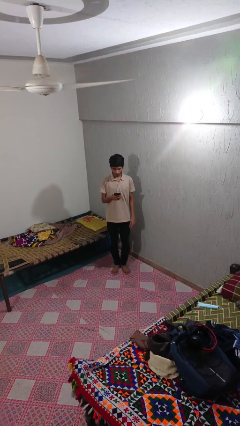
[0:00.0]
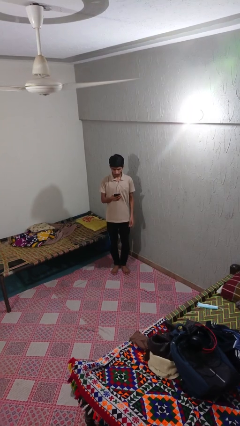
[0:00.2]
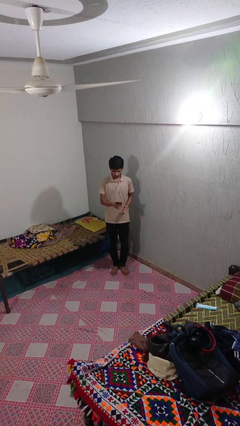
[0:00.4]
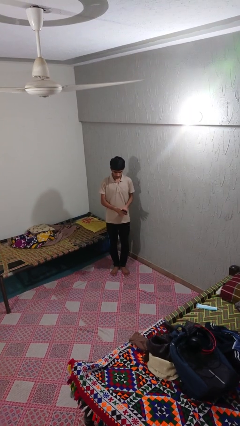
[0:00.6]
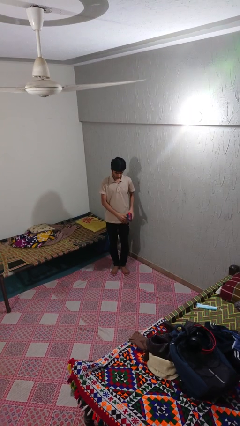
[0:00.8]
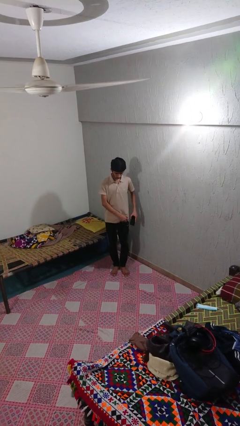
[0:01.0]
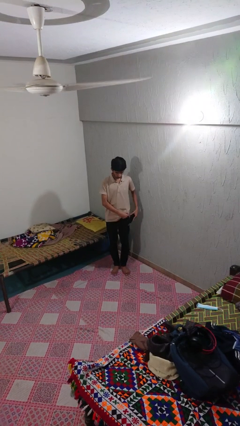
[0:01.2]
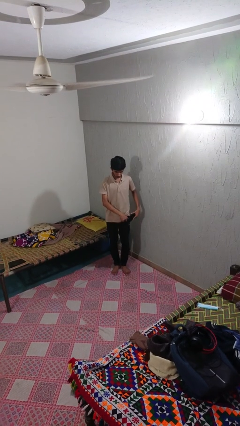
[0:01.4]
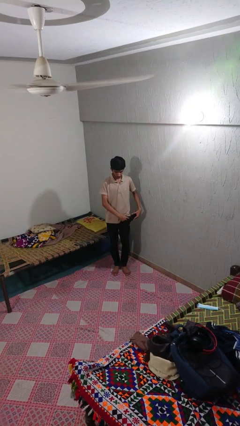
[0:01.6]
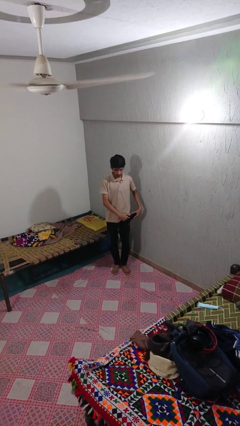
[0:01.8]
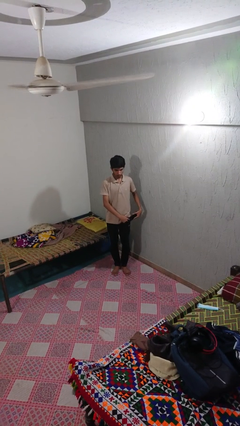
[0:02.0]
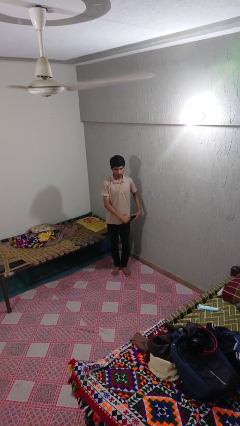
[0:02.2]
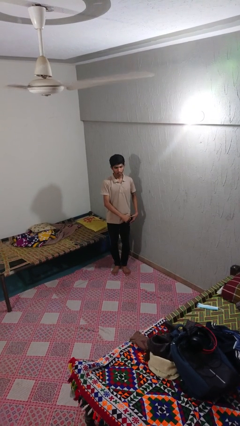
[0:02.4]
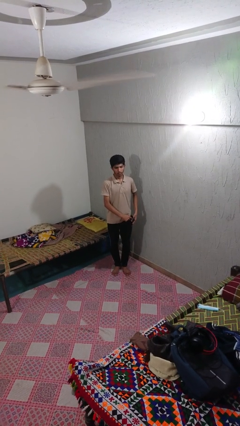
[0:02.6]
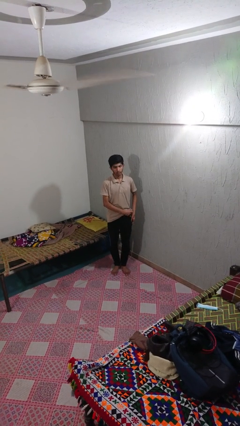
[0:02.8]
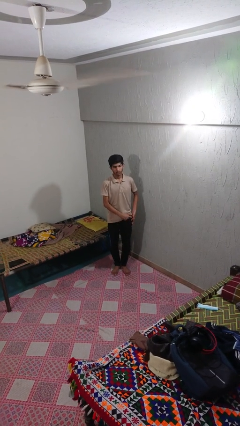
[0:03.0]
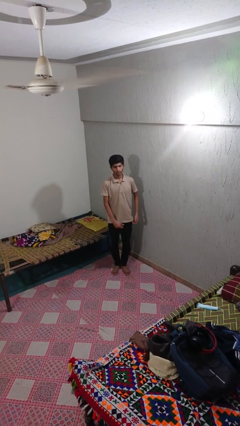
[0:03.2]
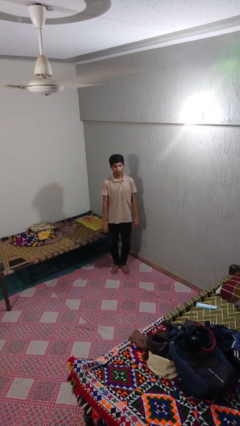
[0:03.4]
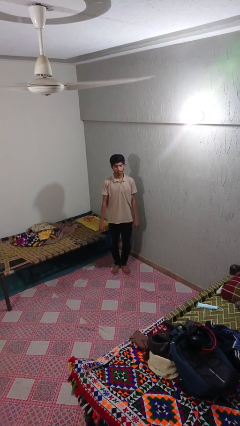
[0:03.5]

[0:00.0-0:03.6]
person puts phone into pocket

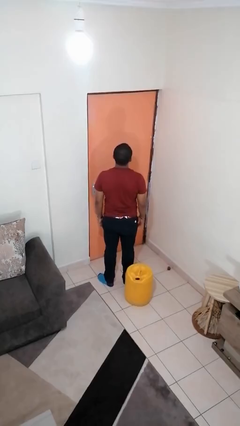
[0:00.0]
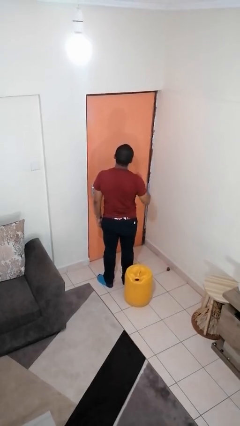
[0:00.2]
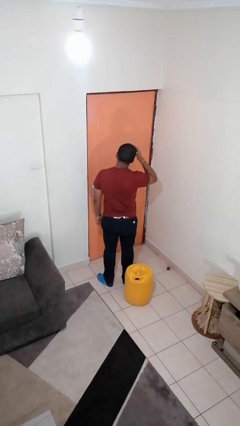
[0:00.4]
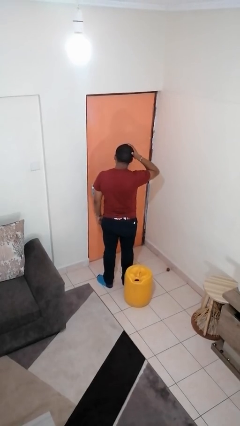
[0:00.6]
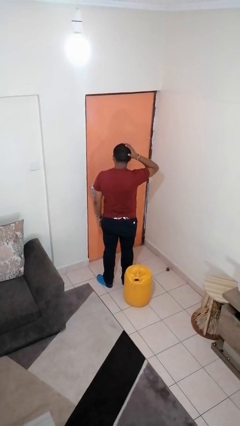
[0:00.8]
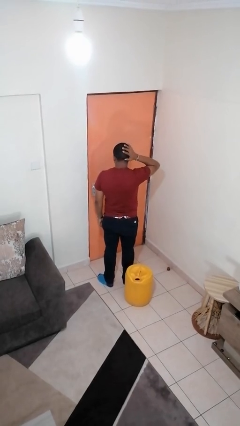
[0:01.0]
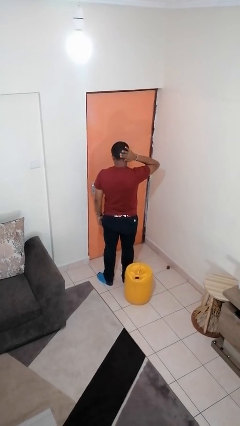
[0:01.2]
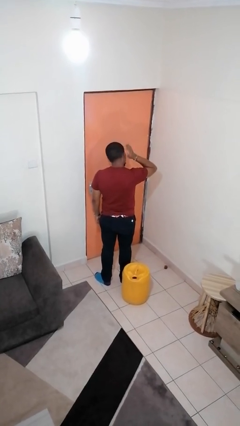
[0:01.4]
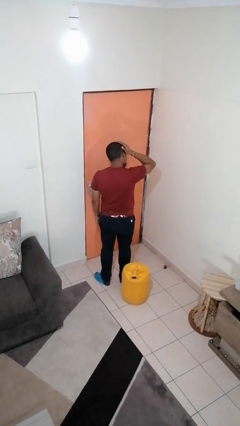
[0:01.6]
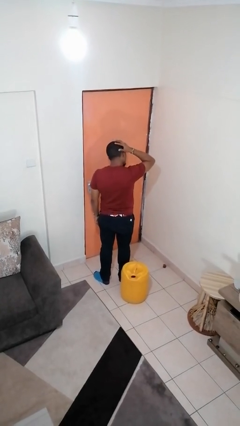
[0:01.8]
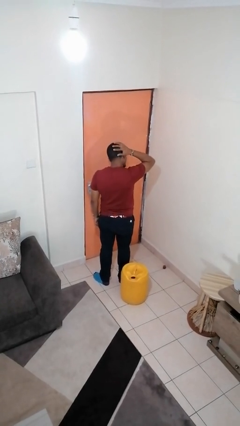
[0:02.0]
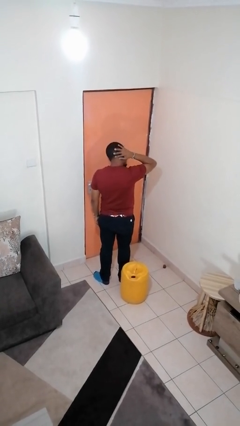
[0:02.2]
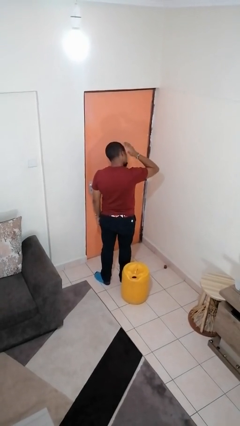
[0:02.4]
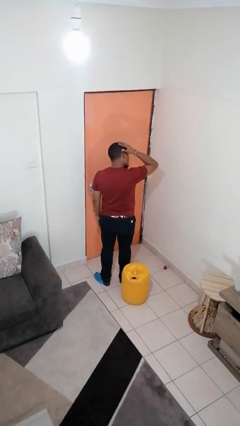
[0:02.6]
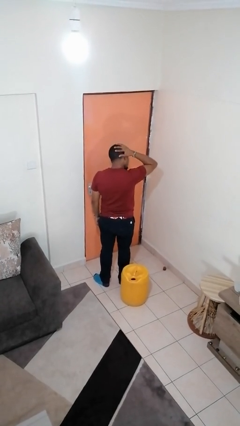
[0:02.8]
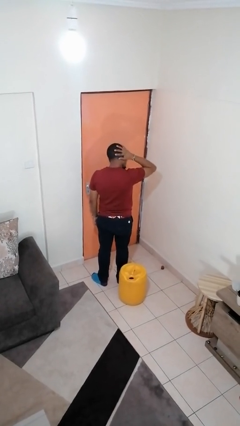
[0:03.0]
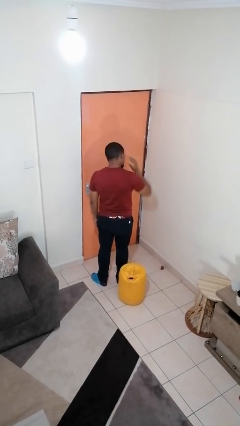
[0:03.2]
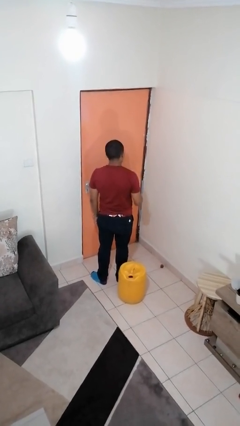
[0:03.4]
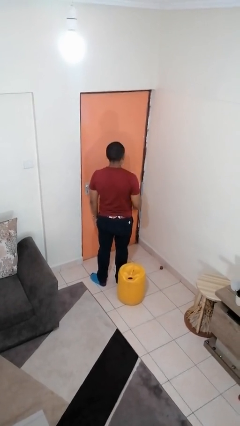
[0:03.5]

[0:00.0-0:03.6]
person strokes hair

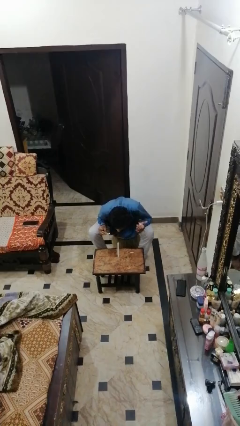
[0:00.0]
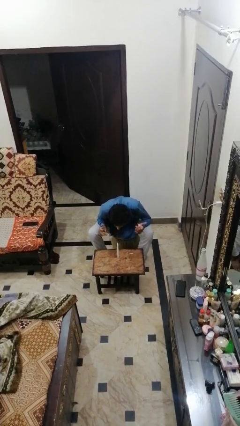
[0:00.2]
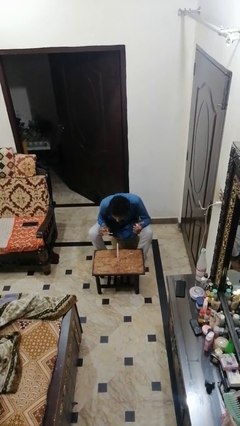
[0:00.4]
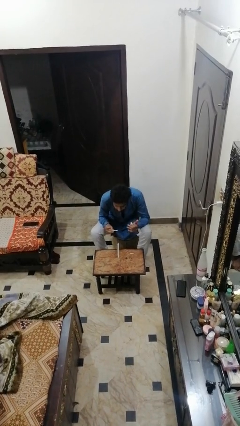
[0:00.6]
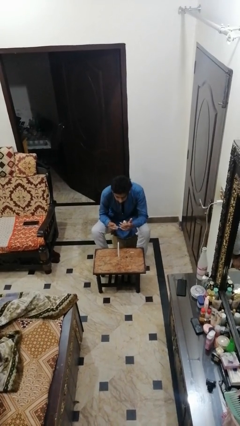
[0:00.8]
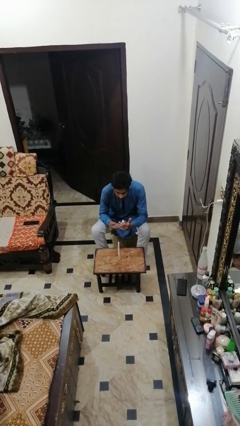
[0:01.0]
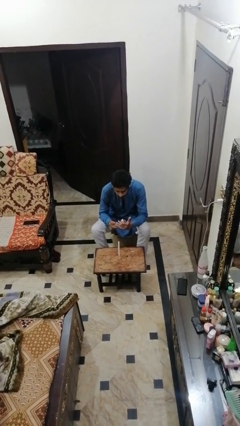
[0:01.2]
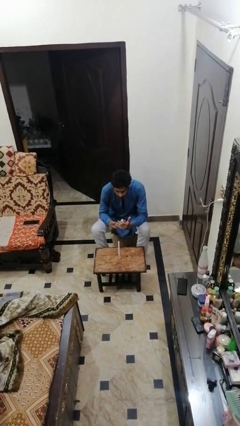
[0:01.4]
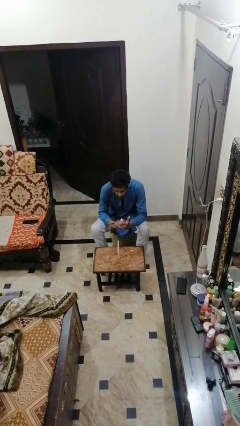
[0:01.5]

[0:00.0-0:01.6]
person extinguishes candle

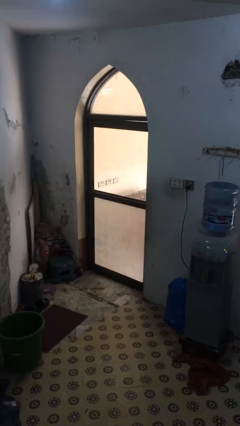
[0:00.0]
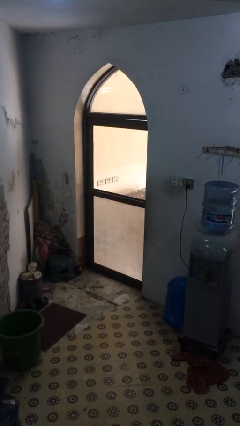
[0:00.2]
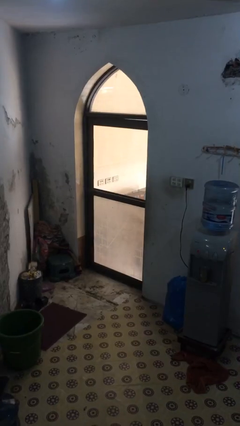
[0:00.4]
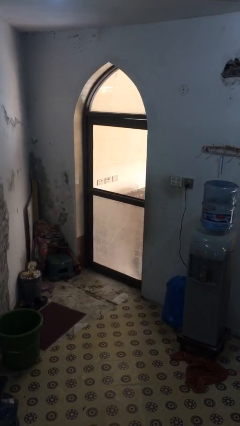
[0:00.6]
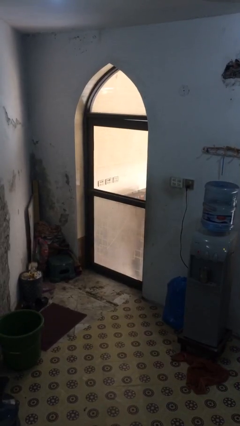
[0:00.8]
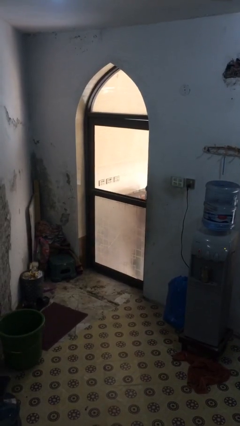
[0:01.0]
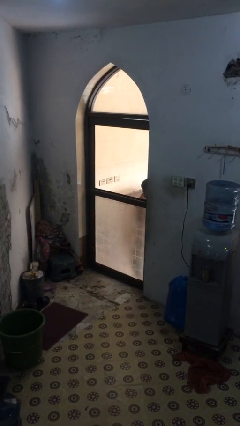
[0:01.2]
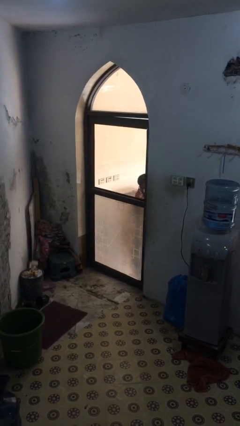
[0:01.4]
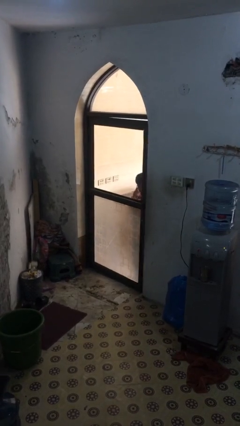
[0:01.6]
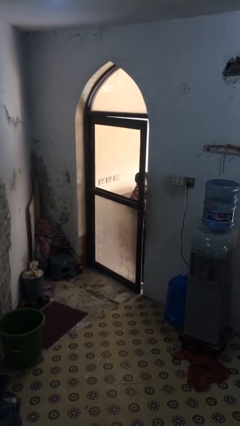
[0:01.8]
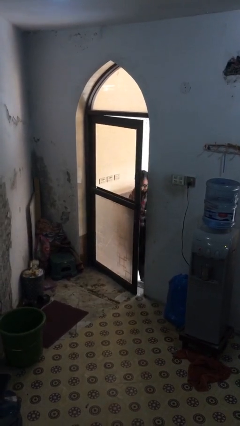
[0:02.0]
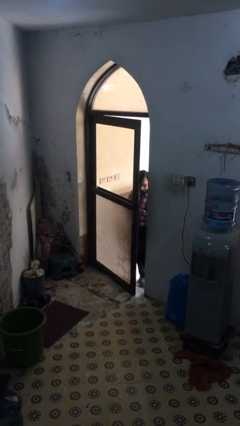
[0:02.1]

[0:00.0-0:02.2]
person opens facility door

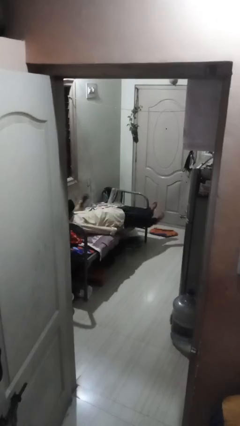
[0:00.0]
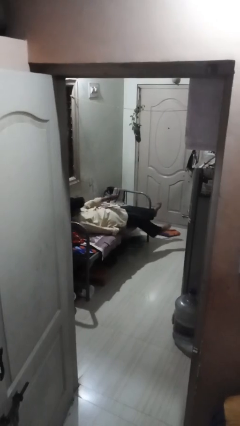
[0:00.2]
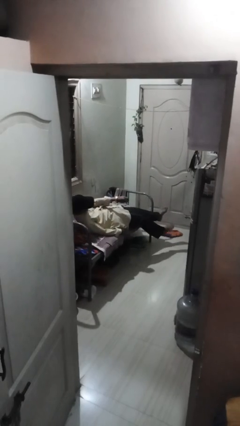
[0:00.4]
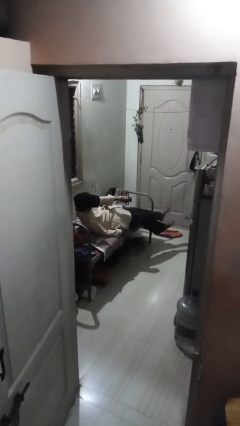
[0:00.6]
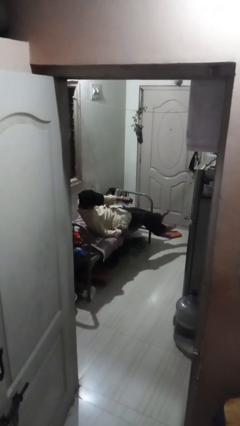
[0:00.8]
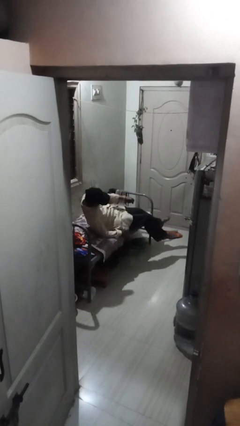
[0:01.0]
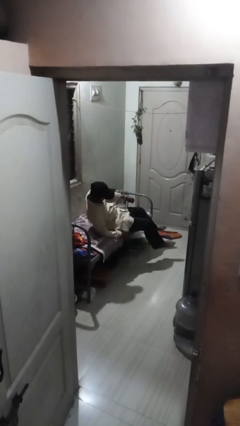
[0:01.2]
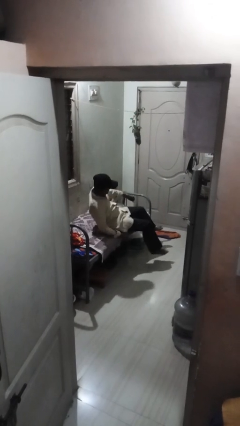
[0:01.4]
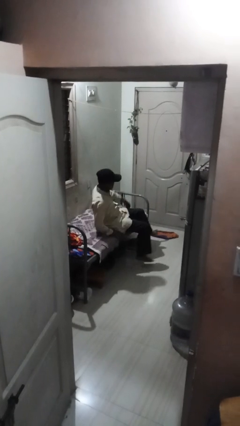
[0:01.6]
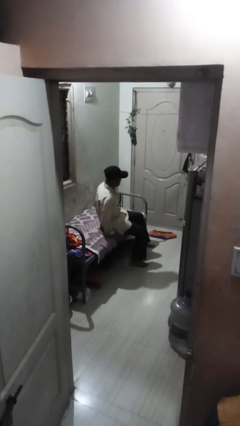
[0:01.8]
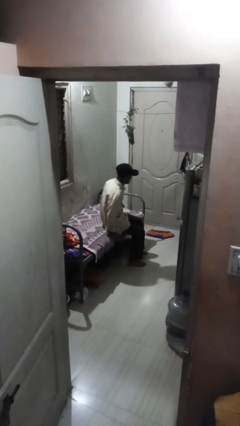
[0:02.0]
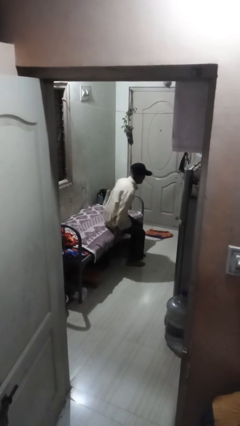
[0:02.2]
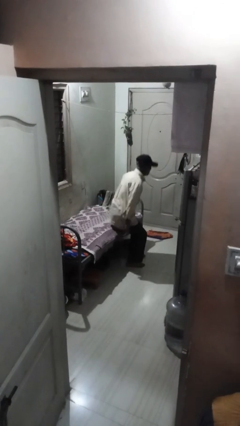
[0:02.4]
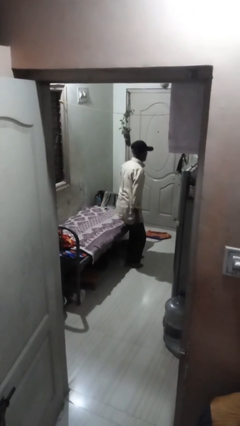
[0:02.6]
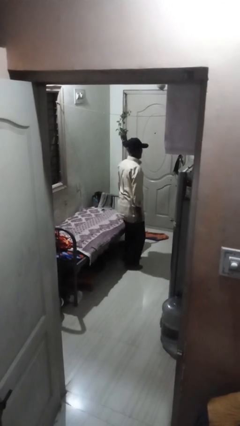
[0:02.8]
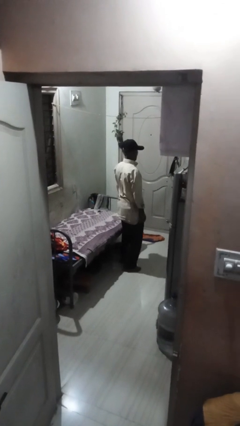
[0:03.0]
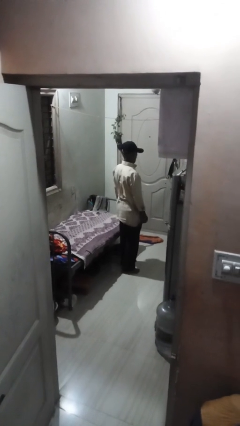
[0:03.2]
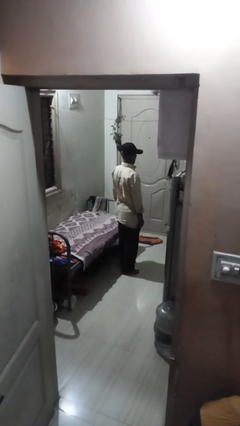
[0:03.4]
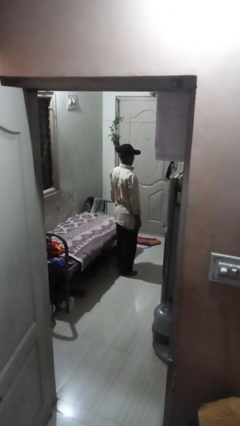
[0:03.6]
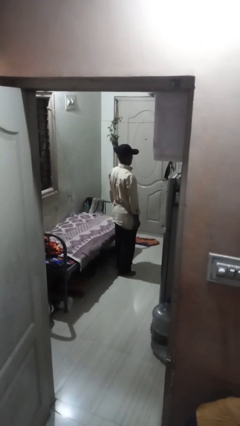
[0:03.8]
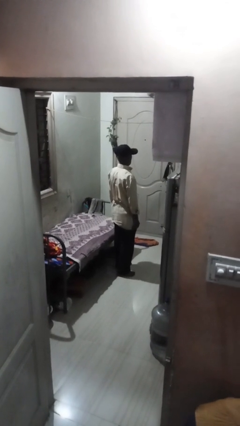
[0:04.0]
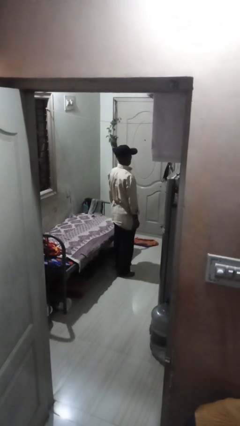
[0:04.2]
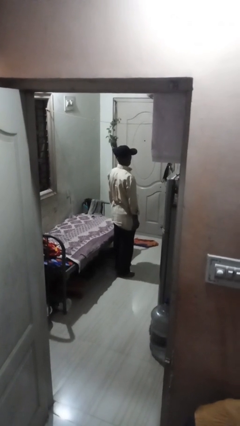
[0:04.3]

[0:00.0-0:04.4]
person stands up

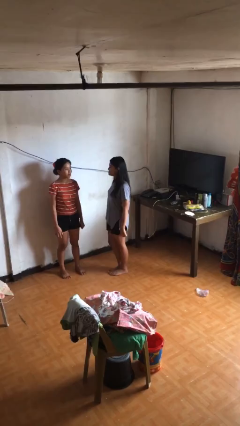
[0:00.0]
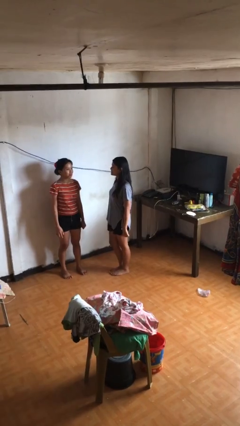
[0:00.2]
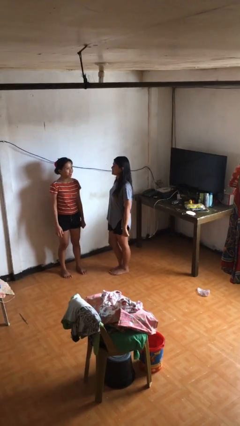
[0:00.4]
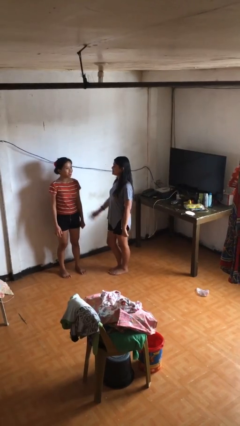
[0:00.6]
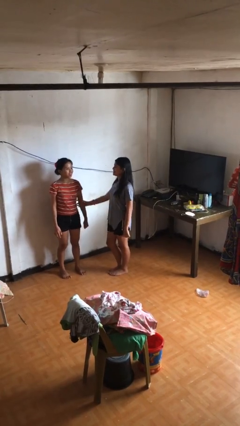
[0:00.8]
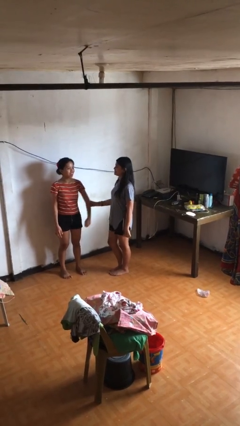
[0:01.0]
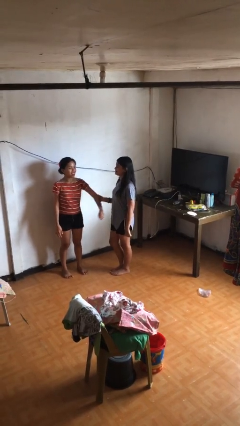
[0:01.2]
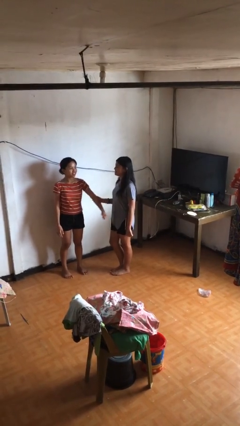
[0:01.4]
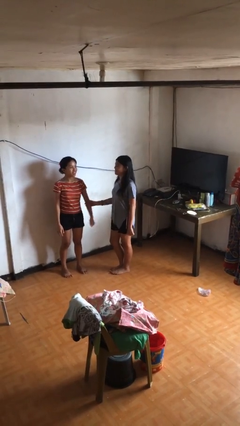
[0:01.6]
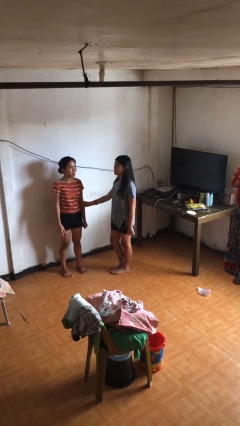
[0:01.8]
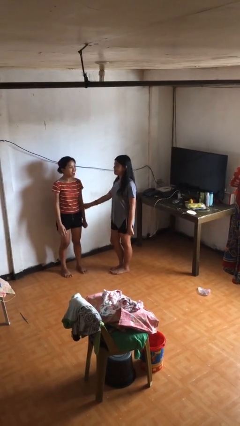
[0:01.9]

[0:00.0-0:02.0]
person grabs person by forearm
